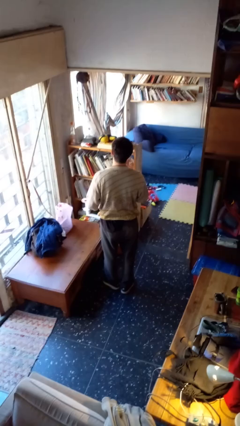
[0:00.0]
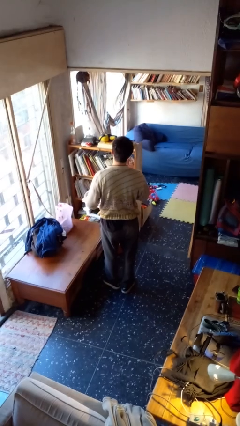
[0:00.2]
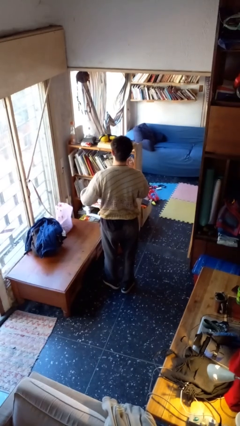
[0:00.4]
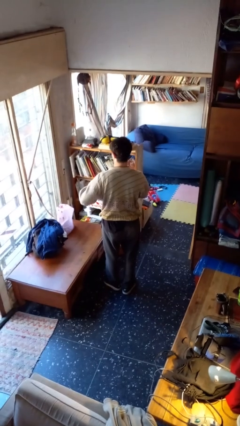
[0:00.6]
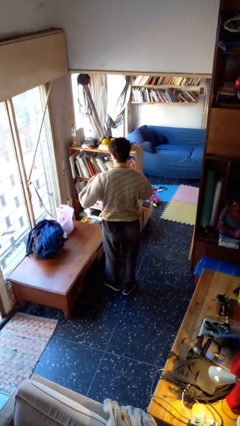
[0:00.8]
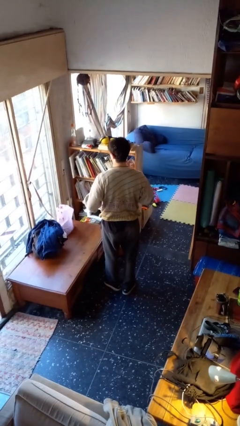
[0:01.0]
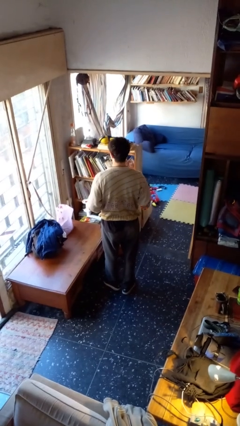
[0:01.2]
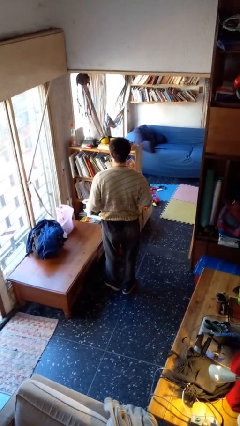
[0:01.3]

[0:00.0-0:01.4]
person takes off ring

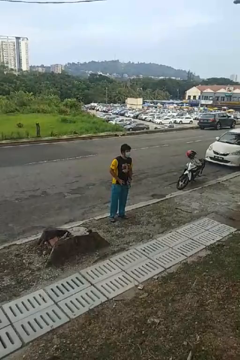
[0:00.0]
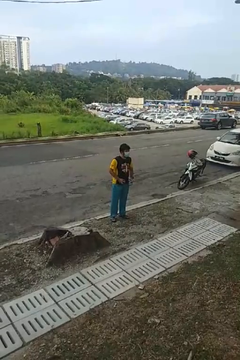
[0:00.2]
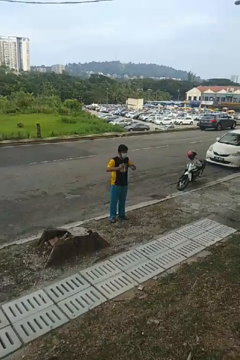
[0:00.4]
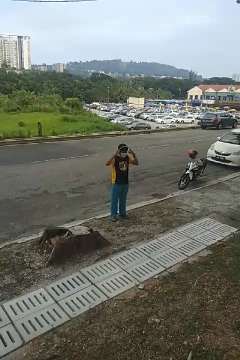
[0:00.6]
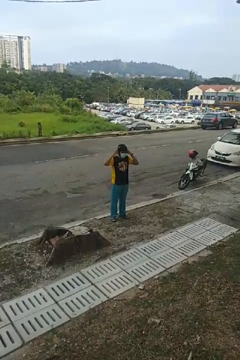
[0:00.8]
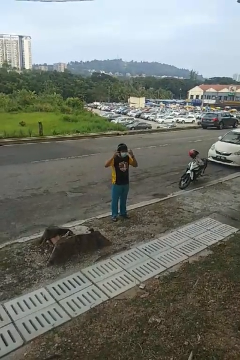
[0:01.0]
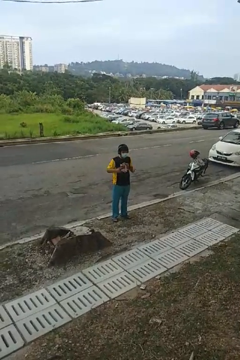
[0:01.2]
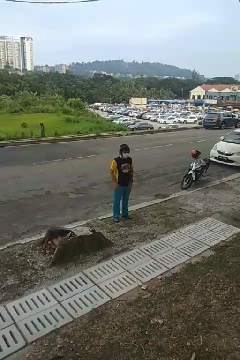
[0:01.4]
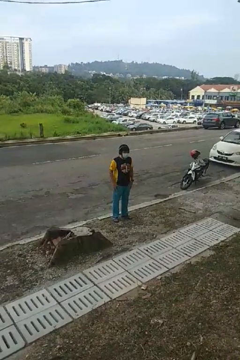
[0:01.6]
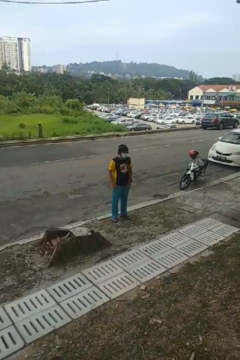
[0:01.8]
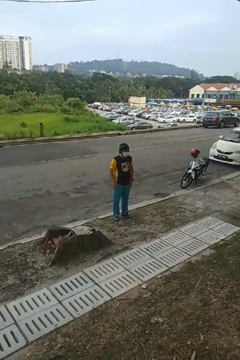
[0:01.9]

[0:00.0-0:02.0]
person puts on headphones

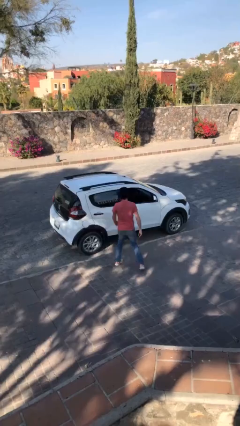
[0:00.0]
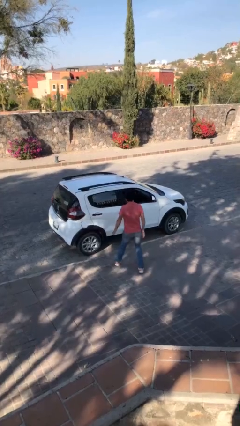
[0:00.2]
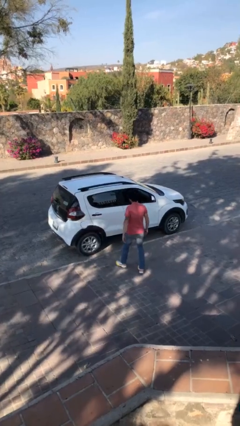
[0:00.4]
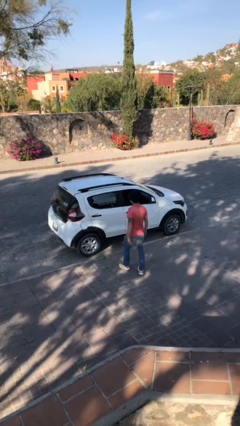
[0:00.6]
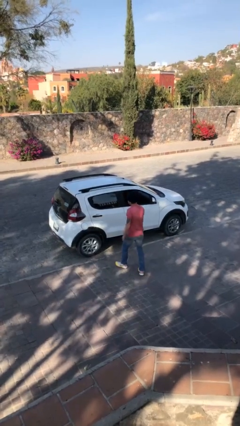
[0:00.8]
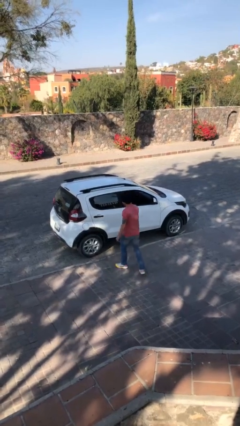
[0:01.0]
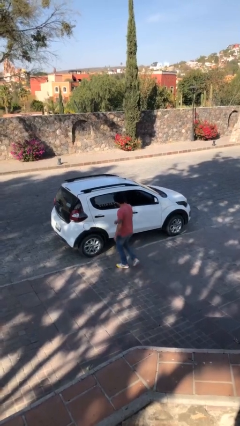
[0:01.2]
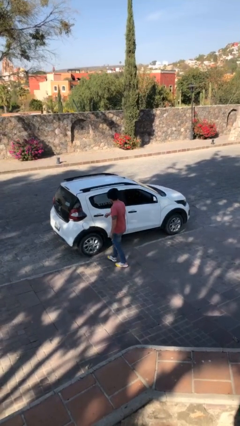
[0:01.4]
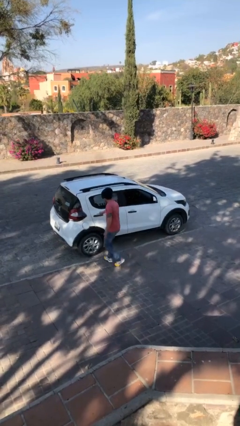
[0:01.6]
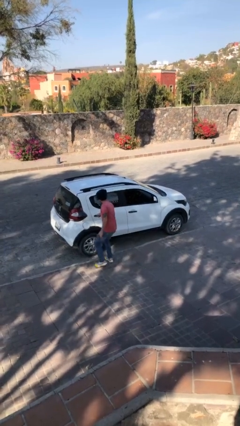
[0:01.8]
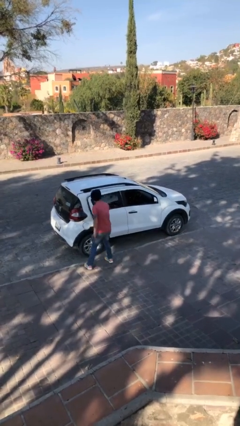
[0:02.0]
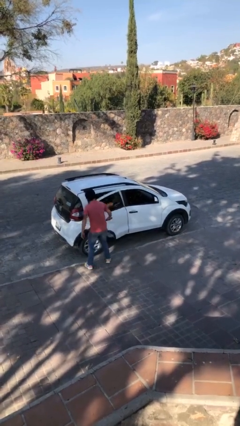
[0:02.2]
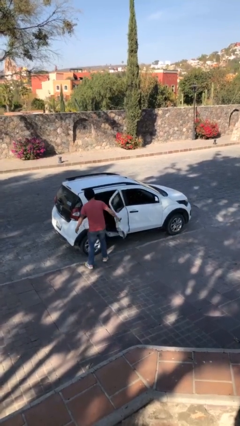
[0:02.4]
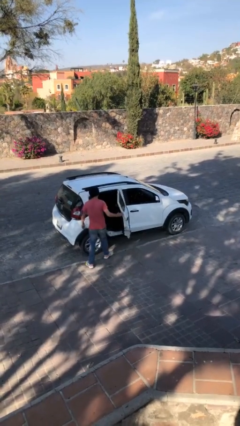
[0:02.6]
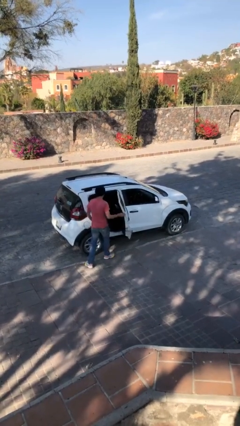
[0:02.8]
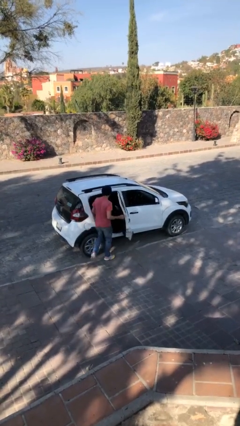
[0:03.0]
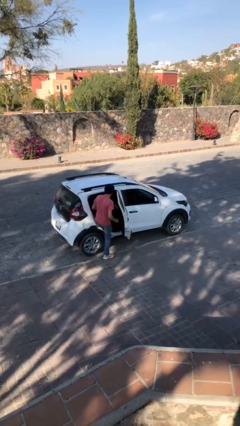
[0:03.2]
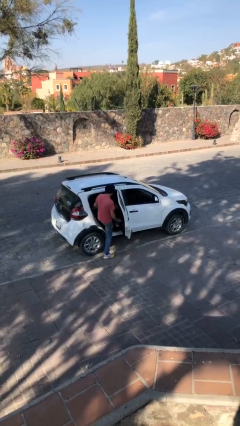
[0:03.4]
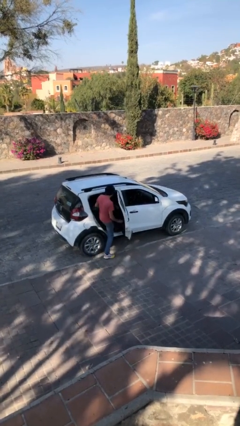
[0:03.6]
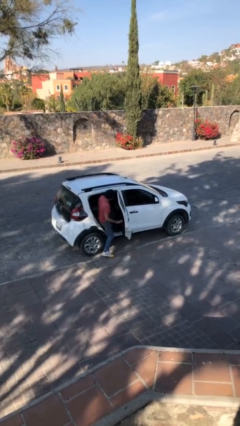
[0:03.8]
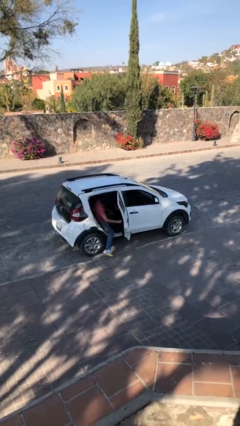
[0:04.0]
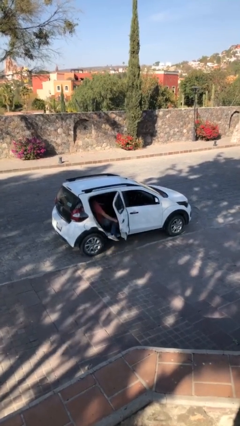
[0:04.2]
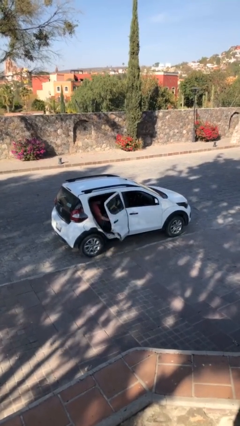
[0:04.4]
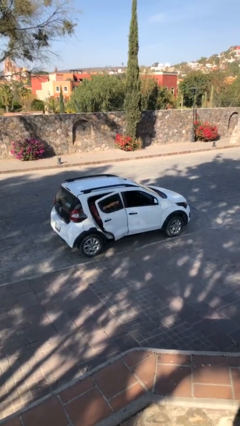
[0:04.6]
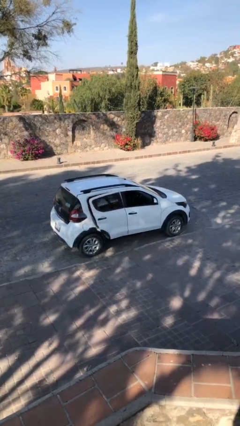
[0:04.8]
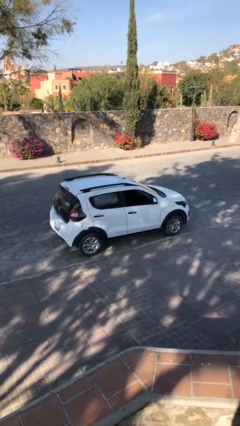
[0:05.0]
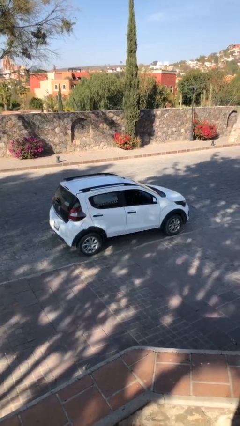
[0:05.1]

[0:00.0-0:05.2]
car picks up person

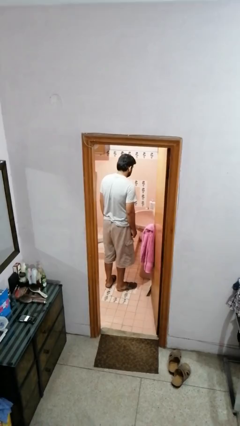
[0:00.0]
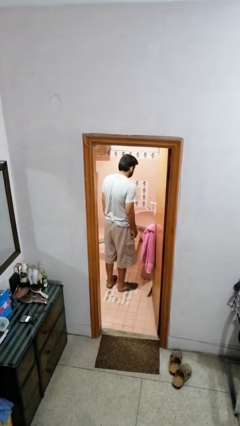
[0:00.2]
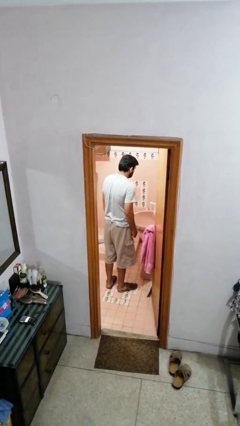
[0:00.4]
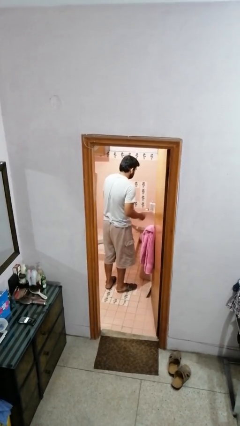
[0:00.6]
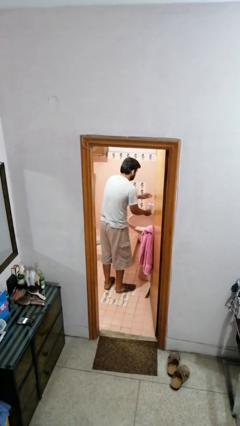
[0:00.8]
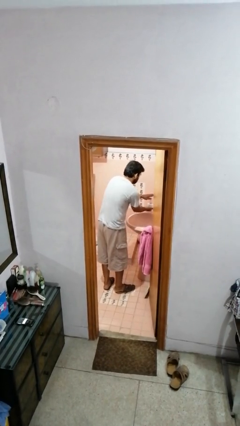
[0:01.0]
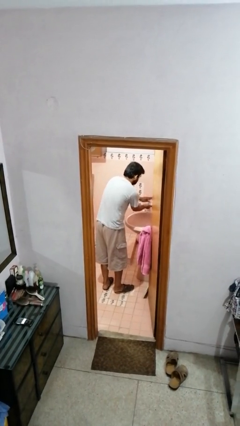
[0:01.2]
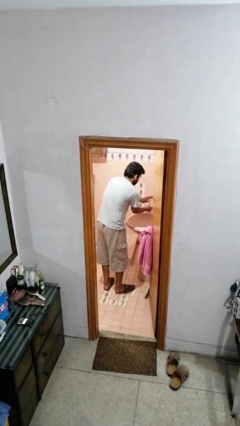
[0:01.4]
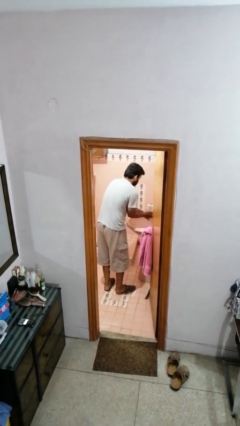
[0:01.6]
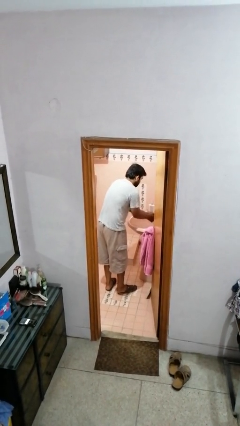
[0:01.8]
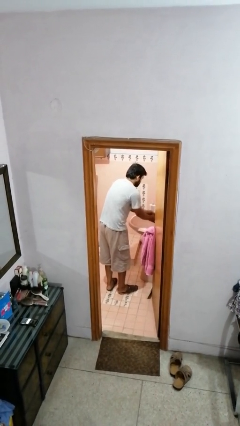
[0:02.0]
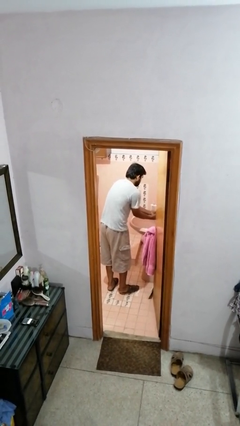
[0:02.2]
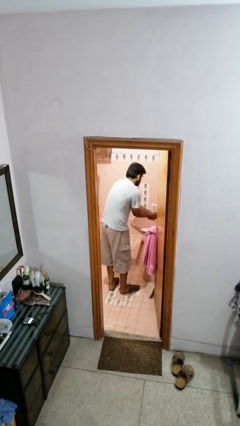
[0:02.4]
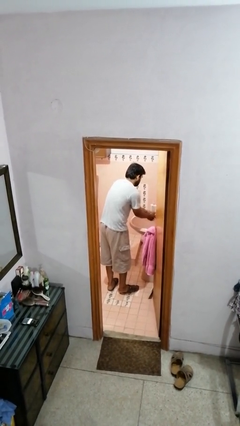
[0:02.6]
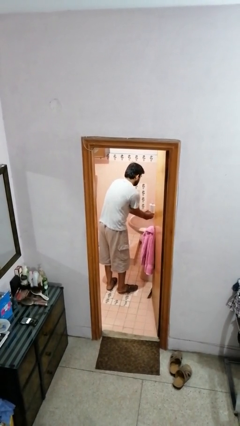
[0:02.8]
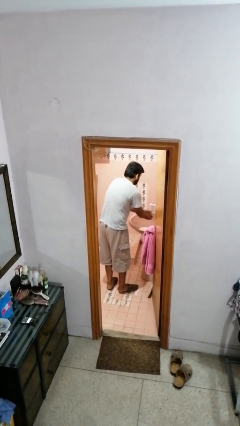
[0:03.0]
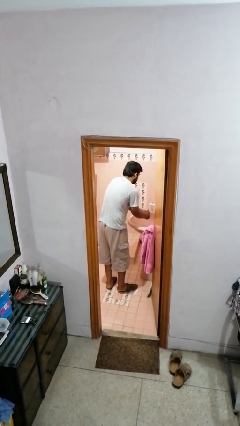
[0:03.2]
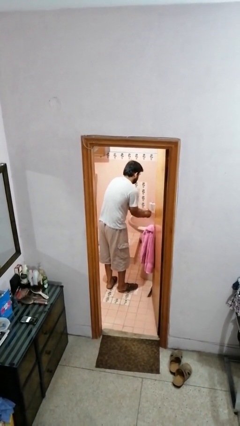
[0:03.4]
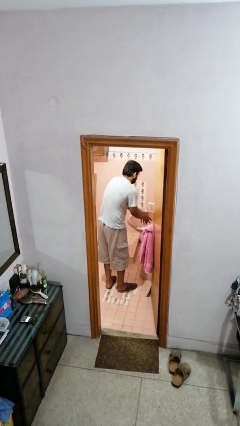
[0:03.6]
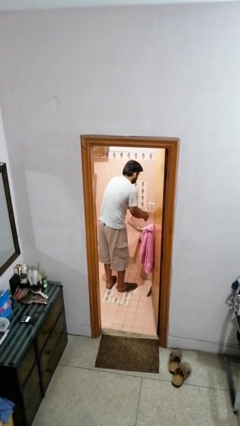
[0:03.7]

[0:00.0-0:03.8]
person washes hands

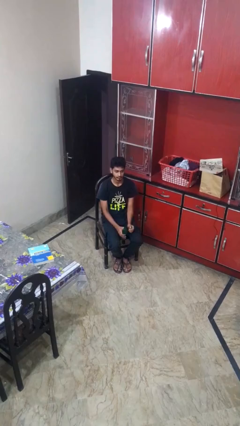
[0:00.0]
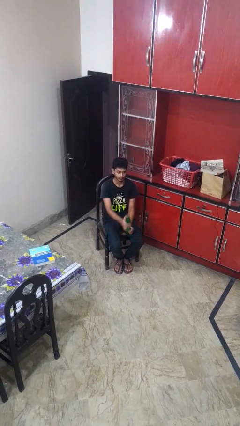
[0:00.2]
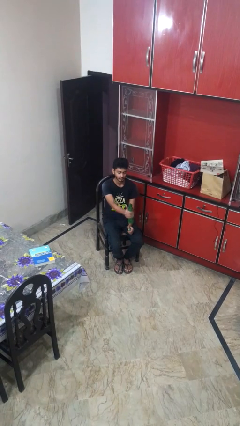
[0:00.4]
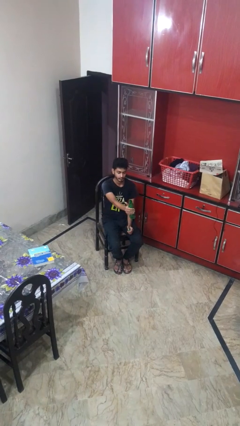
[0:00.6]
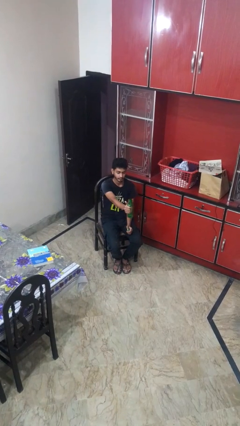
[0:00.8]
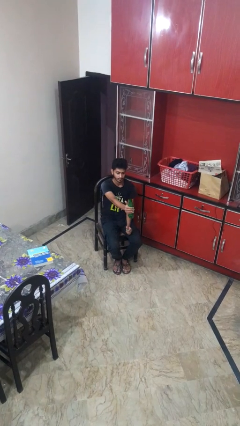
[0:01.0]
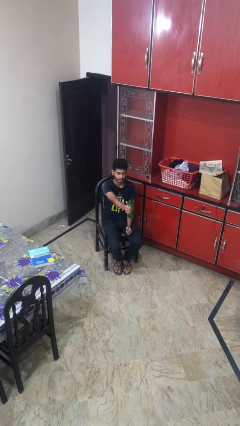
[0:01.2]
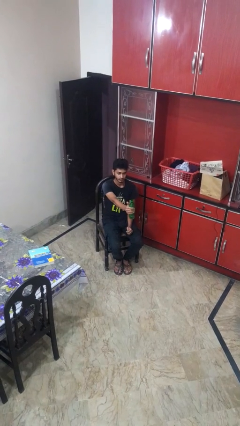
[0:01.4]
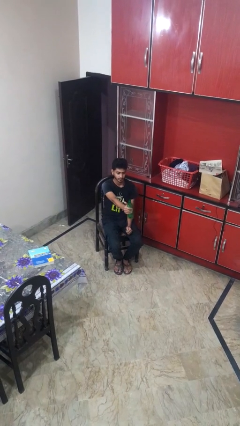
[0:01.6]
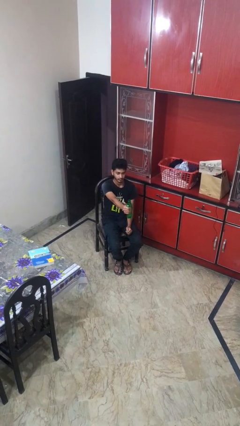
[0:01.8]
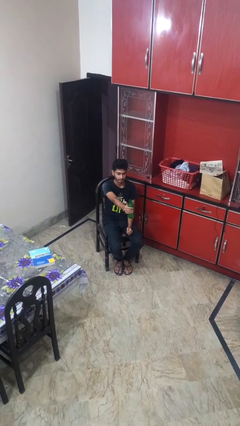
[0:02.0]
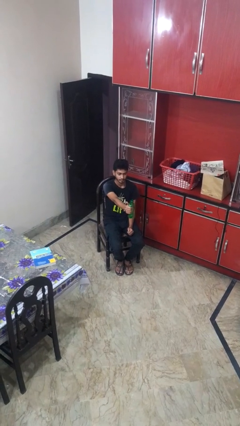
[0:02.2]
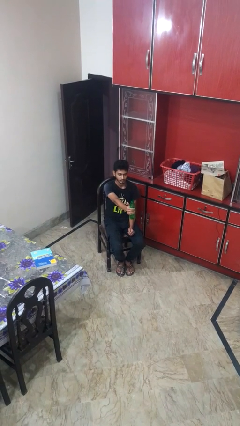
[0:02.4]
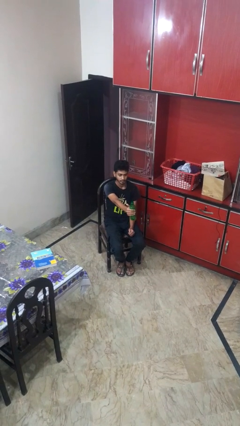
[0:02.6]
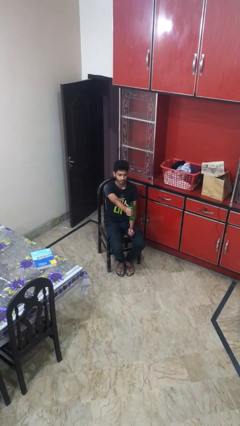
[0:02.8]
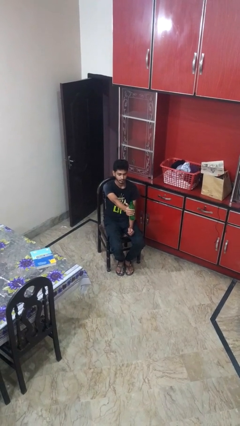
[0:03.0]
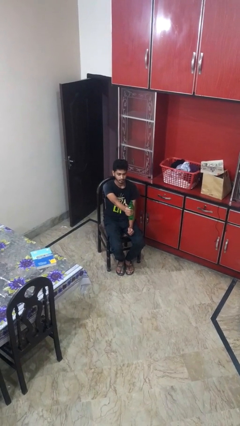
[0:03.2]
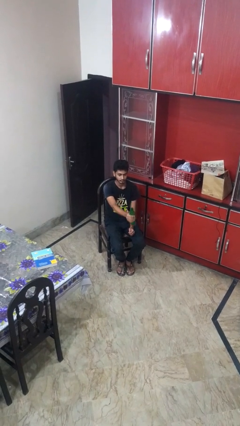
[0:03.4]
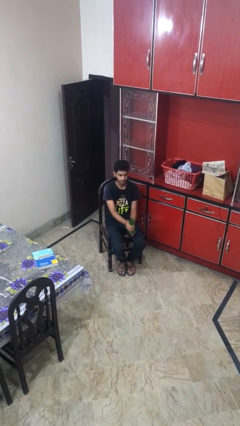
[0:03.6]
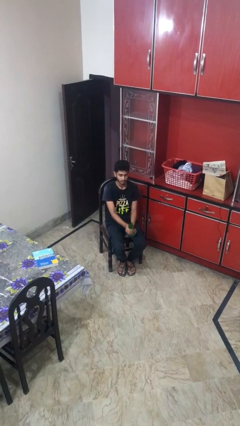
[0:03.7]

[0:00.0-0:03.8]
person squeezes object

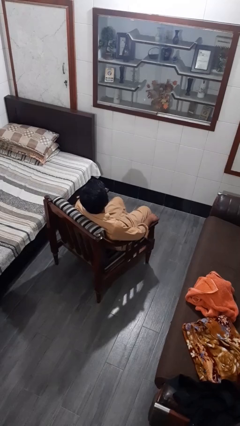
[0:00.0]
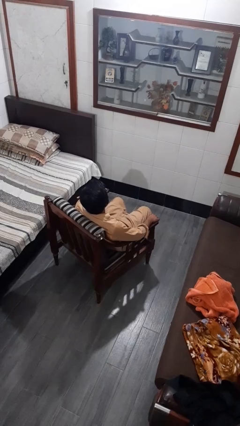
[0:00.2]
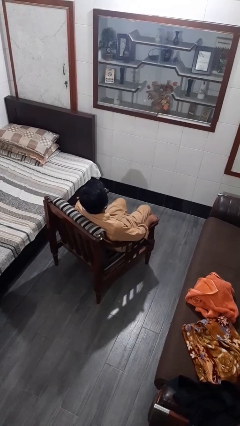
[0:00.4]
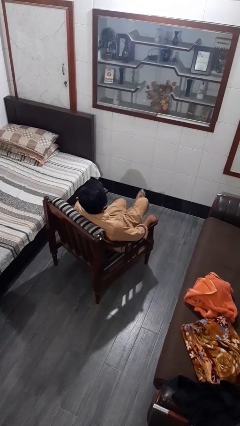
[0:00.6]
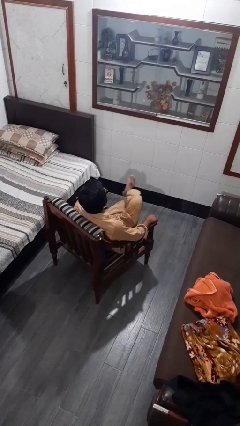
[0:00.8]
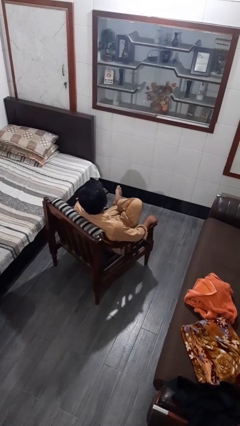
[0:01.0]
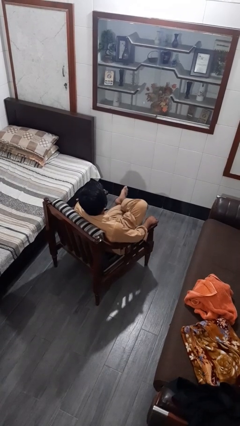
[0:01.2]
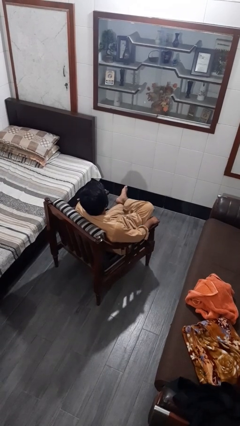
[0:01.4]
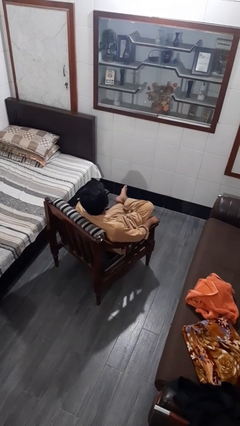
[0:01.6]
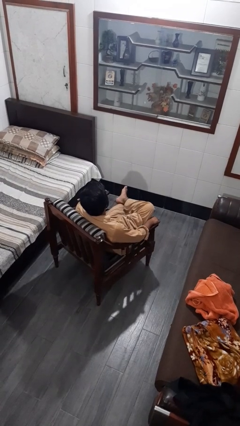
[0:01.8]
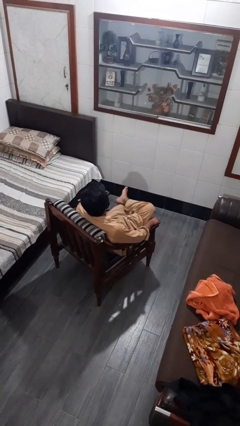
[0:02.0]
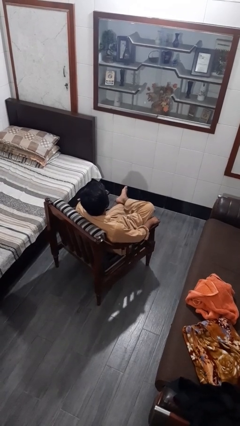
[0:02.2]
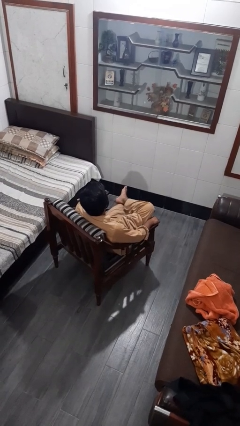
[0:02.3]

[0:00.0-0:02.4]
person crosses legs
